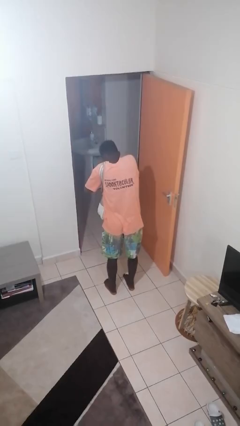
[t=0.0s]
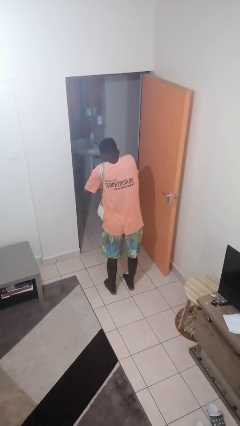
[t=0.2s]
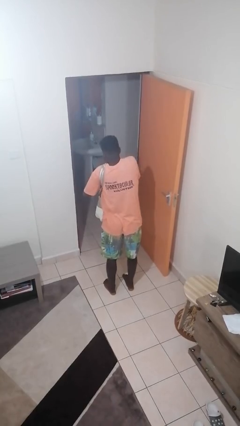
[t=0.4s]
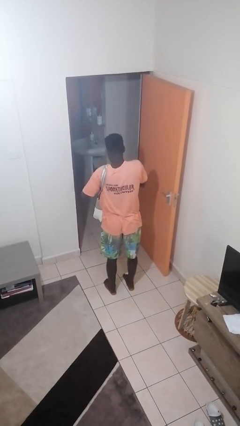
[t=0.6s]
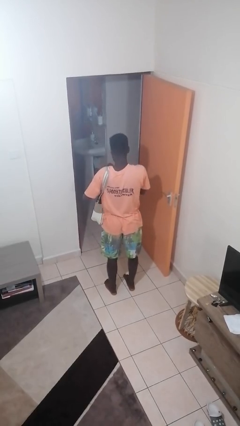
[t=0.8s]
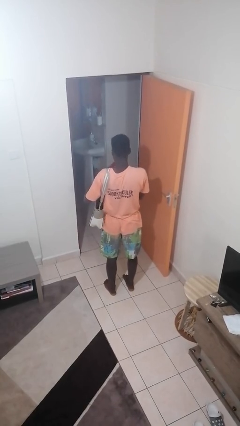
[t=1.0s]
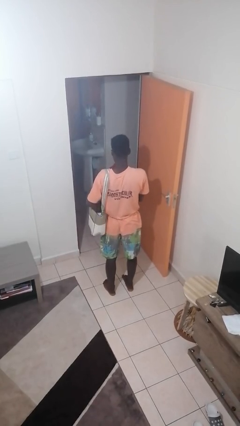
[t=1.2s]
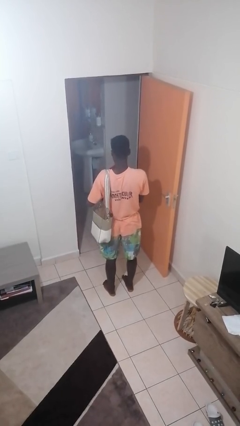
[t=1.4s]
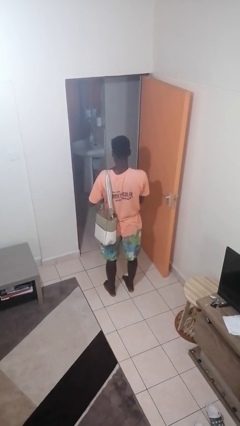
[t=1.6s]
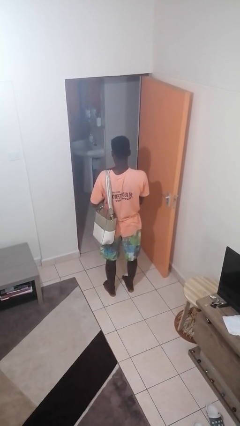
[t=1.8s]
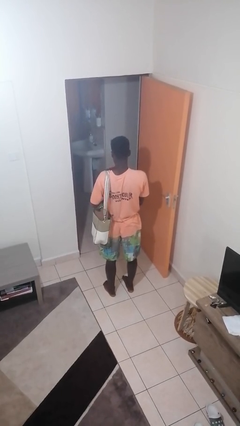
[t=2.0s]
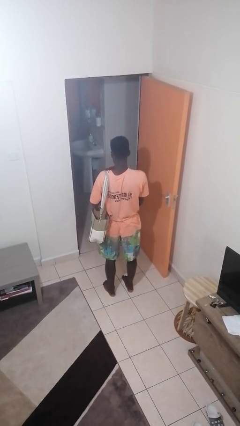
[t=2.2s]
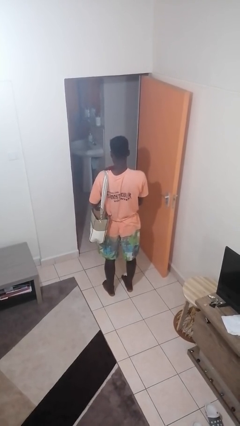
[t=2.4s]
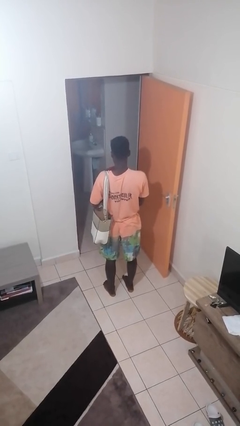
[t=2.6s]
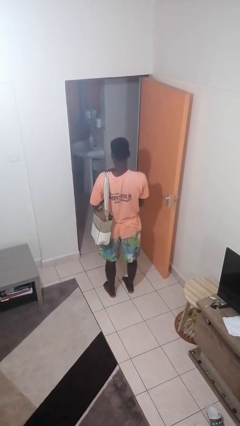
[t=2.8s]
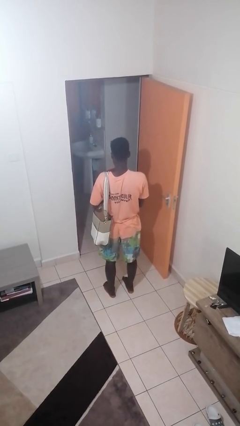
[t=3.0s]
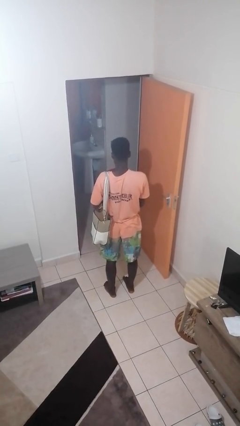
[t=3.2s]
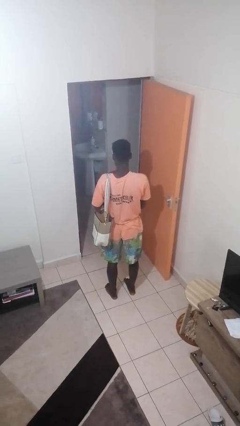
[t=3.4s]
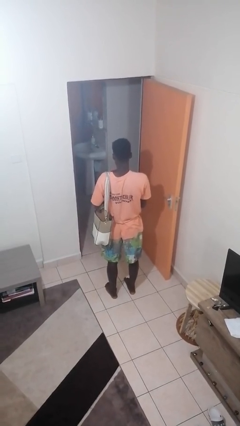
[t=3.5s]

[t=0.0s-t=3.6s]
person takes object from purse

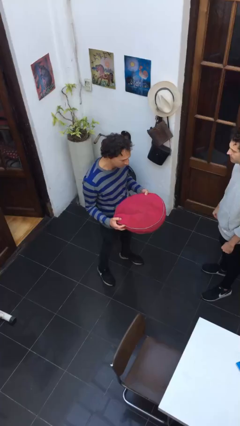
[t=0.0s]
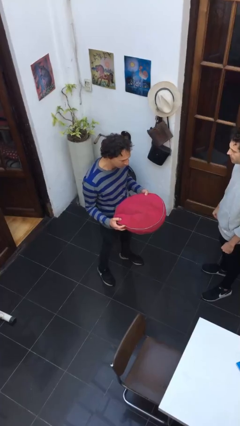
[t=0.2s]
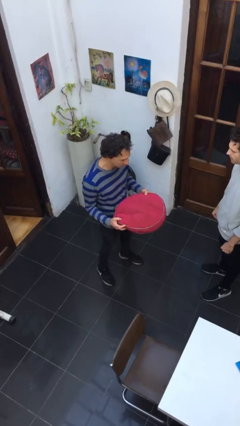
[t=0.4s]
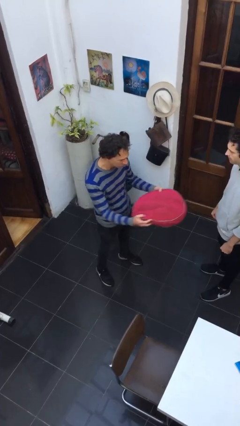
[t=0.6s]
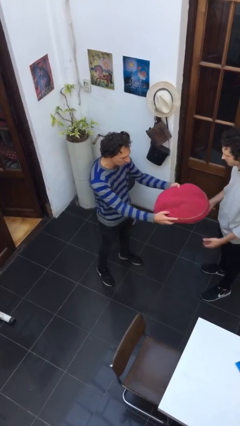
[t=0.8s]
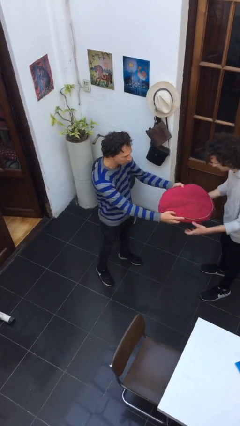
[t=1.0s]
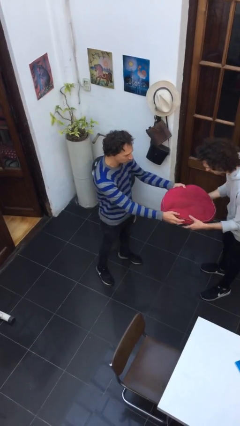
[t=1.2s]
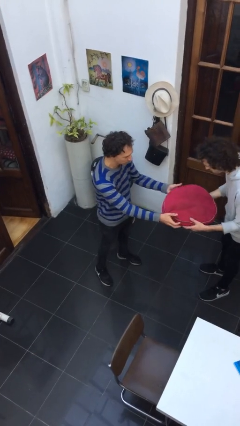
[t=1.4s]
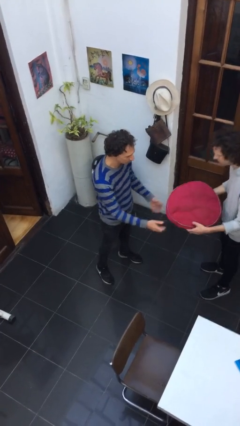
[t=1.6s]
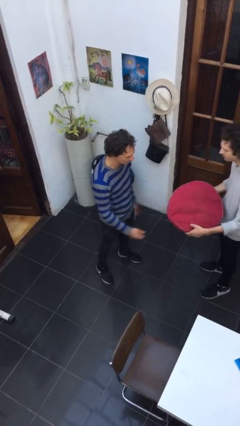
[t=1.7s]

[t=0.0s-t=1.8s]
person transfers object to person

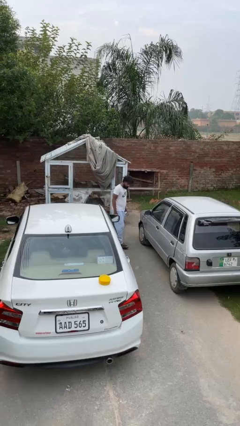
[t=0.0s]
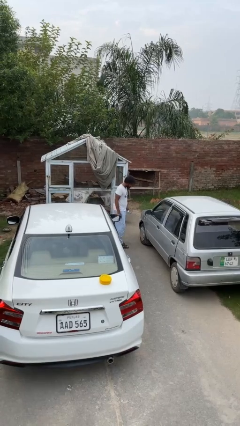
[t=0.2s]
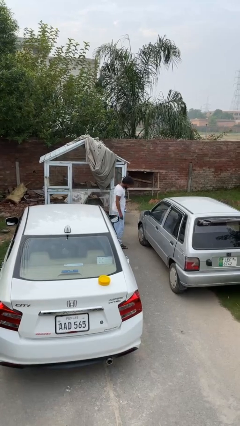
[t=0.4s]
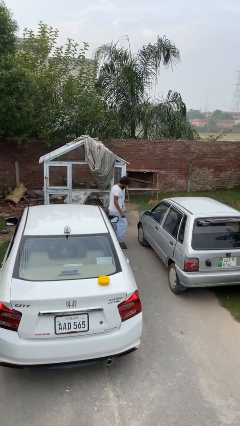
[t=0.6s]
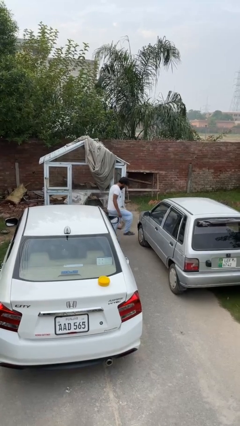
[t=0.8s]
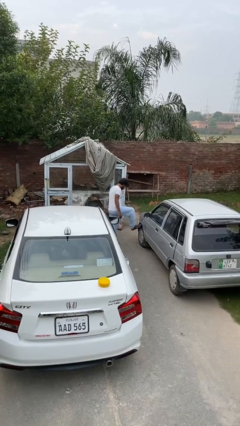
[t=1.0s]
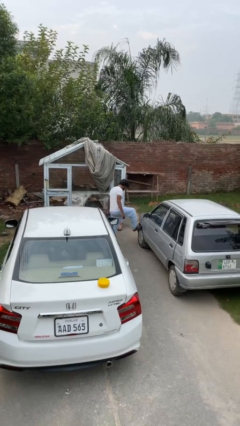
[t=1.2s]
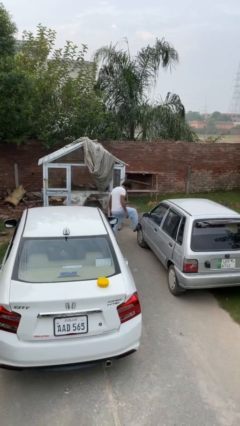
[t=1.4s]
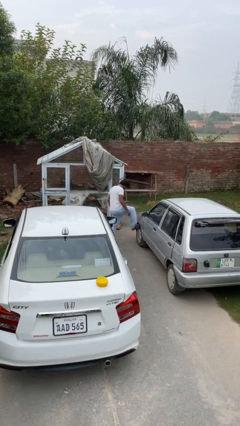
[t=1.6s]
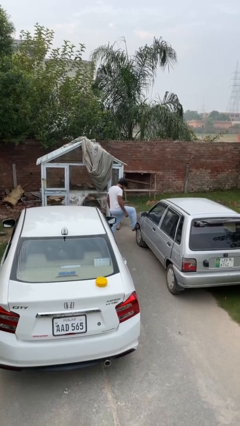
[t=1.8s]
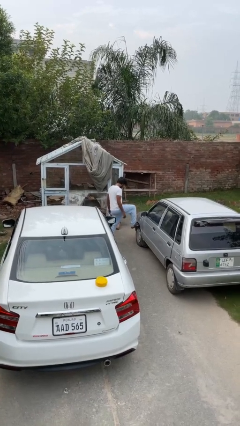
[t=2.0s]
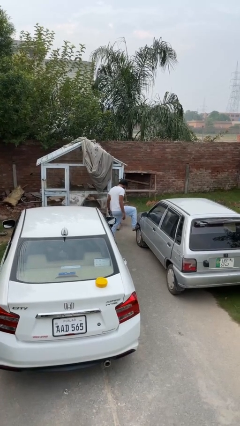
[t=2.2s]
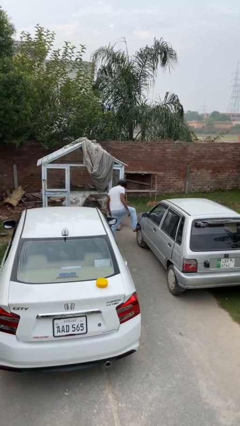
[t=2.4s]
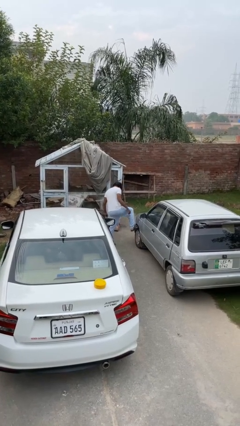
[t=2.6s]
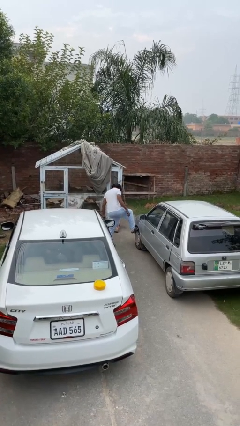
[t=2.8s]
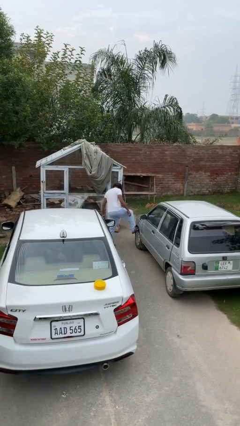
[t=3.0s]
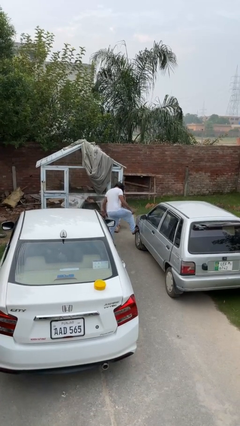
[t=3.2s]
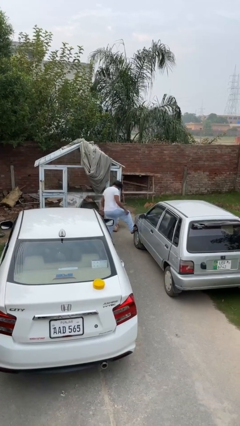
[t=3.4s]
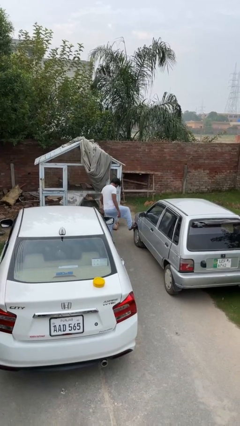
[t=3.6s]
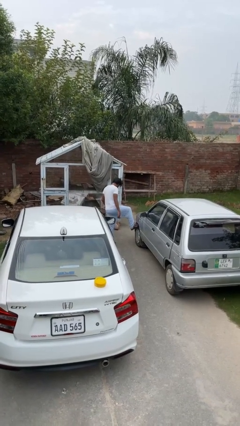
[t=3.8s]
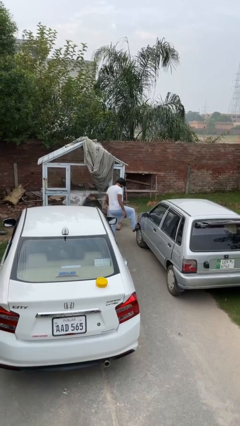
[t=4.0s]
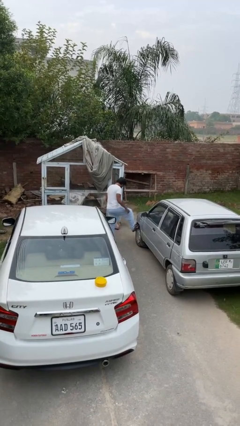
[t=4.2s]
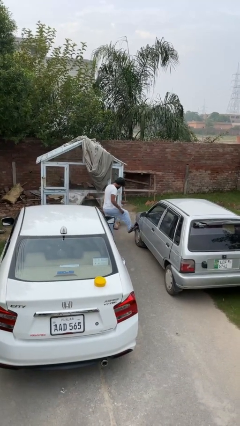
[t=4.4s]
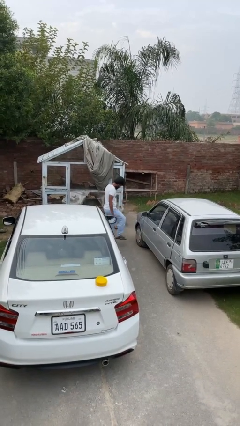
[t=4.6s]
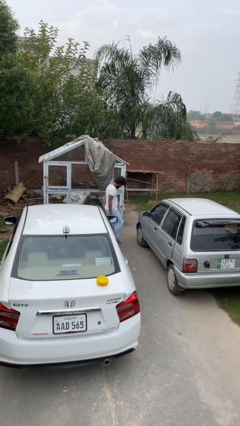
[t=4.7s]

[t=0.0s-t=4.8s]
person kicks car tires

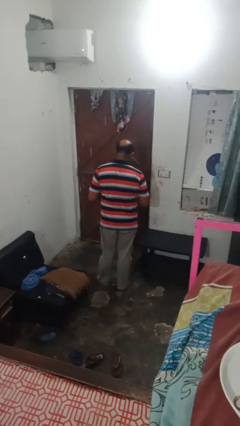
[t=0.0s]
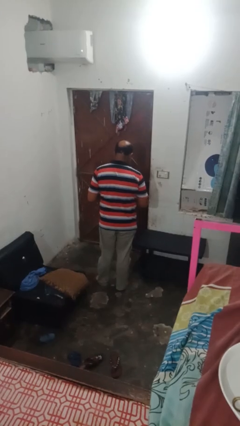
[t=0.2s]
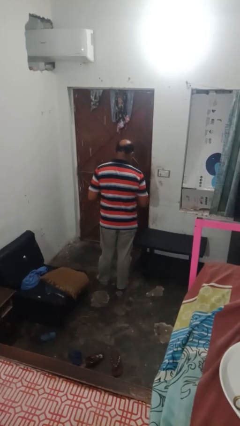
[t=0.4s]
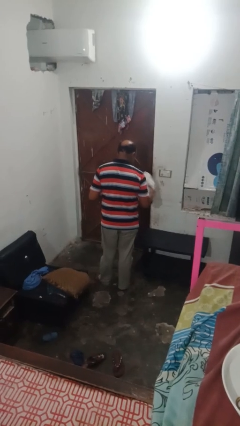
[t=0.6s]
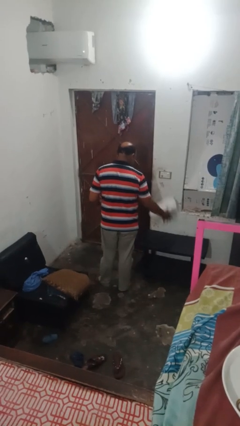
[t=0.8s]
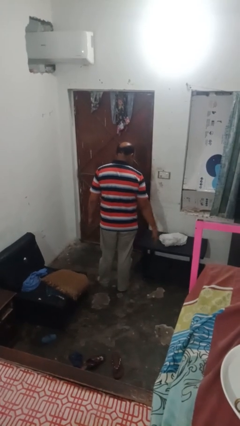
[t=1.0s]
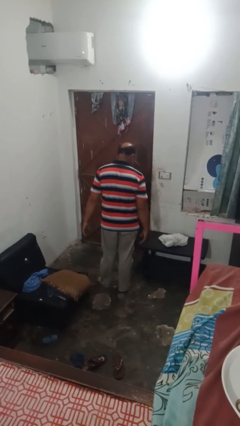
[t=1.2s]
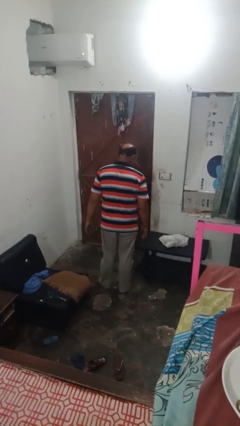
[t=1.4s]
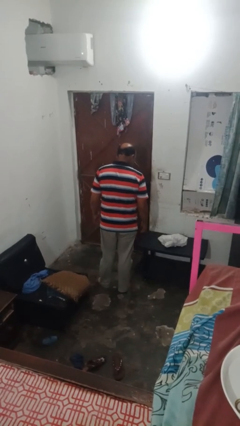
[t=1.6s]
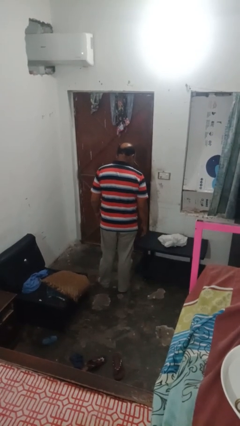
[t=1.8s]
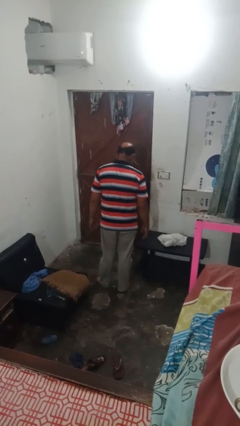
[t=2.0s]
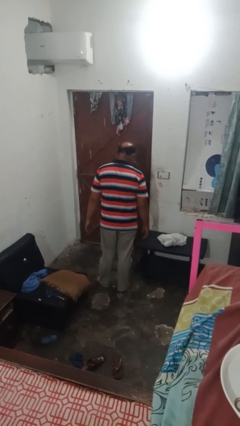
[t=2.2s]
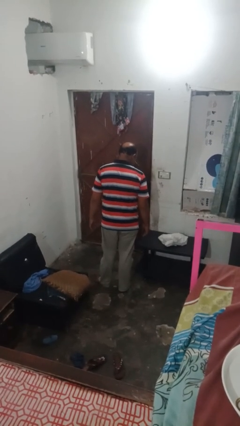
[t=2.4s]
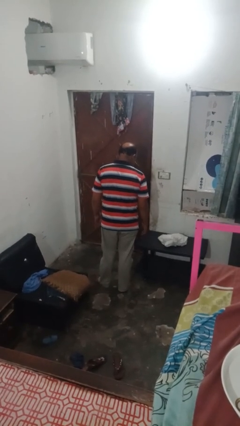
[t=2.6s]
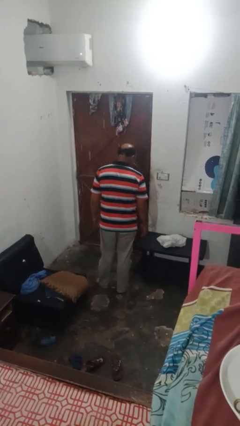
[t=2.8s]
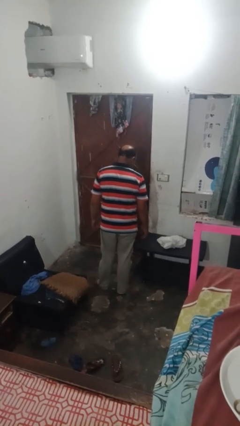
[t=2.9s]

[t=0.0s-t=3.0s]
person throws object on table

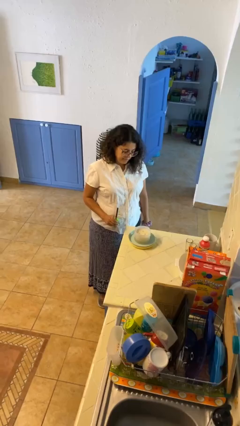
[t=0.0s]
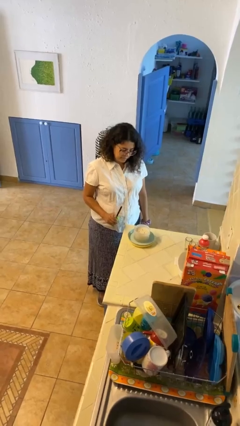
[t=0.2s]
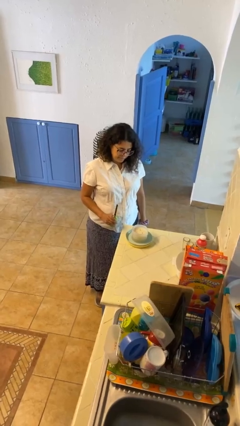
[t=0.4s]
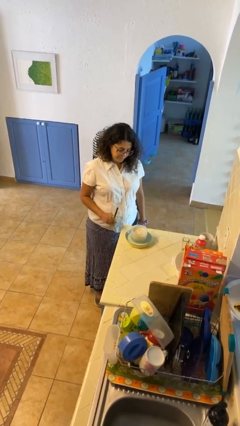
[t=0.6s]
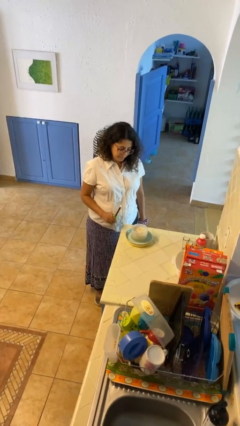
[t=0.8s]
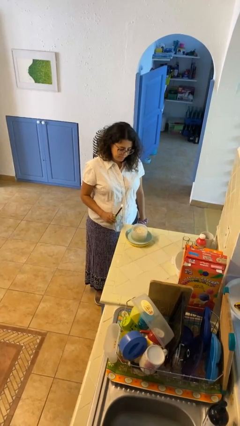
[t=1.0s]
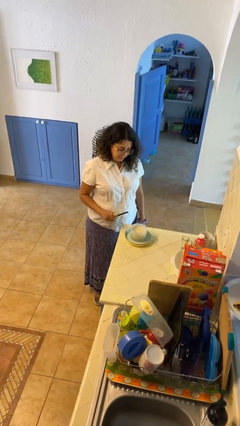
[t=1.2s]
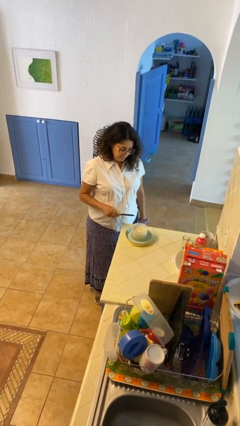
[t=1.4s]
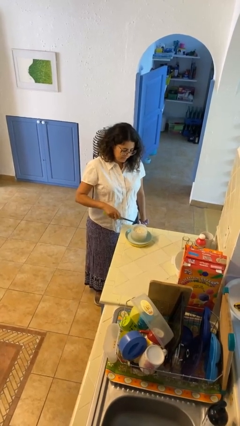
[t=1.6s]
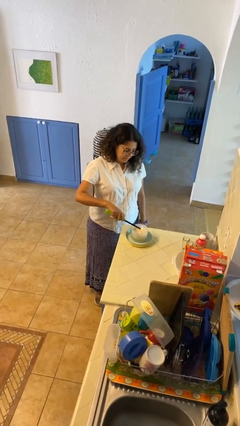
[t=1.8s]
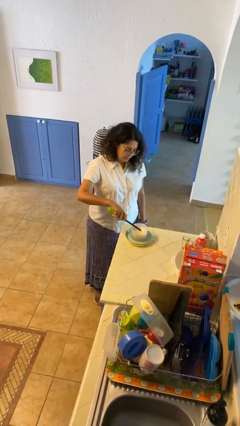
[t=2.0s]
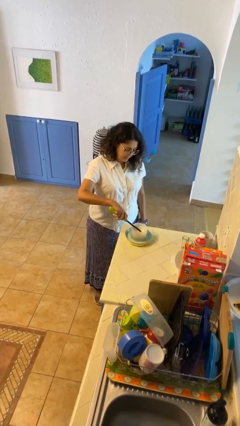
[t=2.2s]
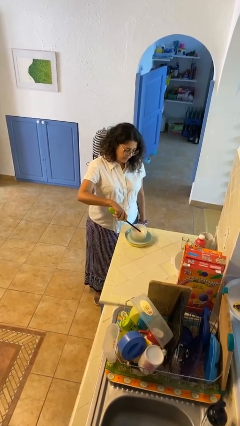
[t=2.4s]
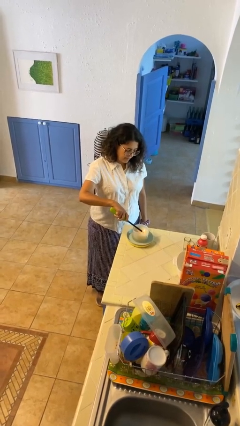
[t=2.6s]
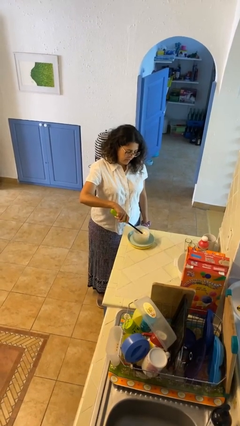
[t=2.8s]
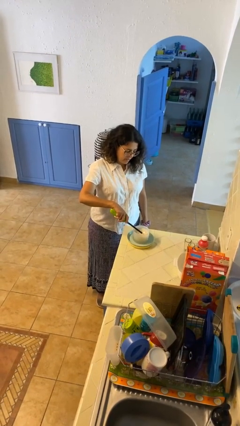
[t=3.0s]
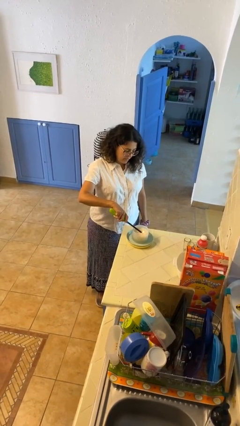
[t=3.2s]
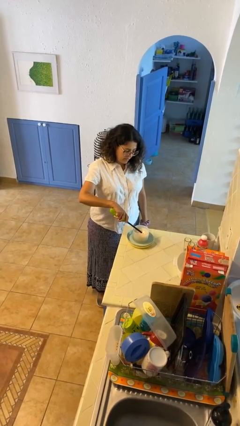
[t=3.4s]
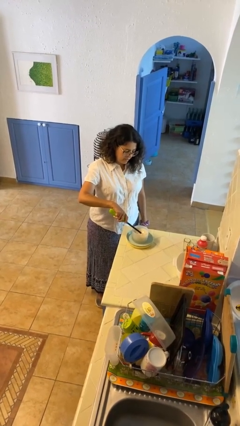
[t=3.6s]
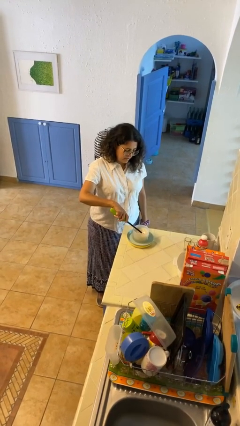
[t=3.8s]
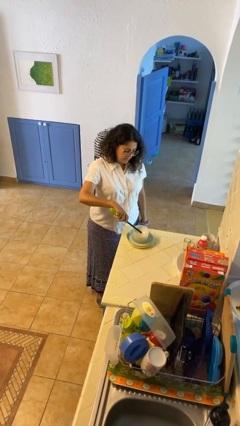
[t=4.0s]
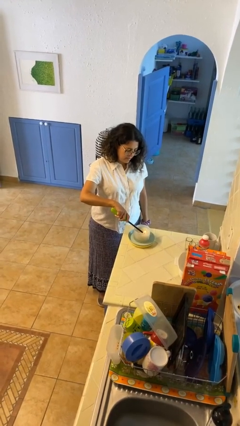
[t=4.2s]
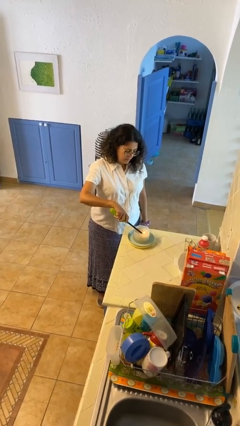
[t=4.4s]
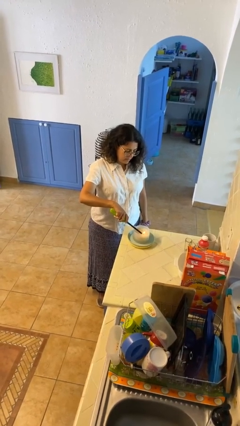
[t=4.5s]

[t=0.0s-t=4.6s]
person lights candle
